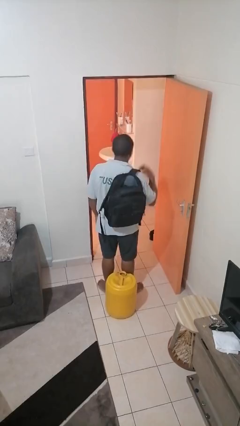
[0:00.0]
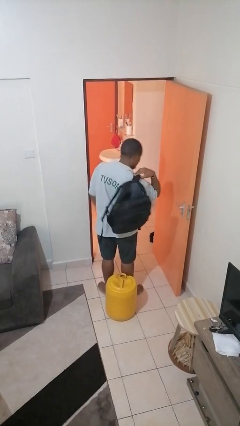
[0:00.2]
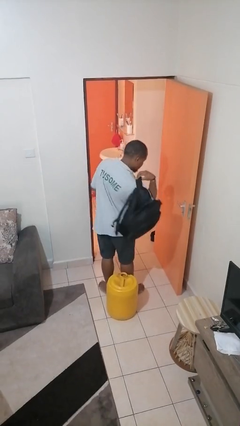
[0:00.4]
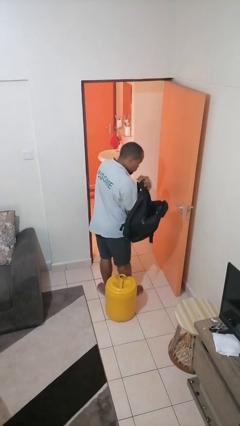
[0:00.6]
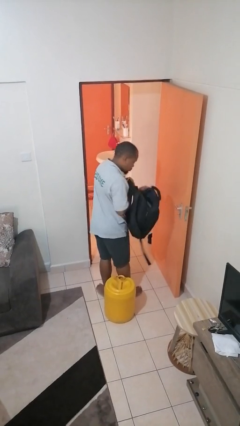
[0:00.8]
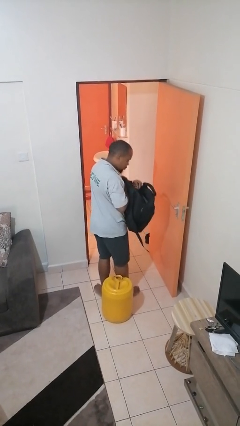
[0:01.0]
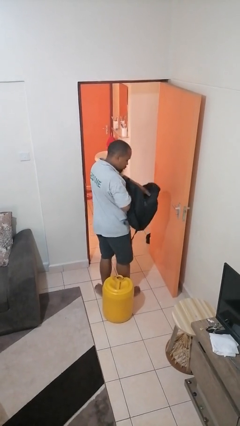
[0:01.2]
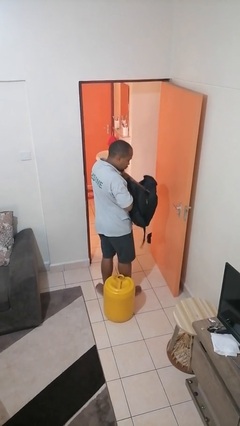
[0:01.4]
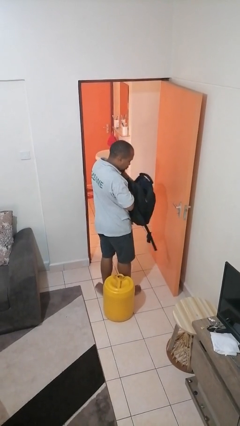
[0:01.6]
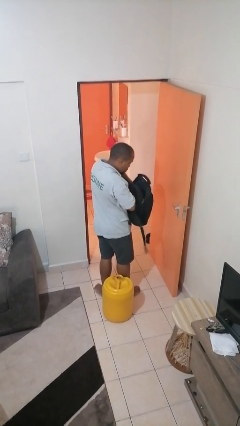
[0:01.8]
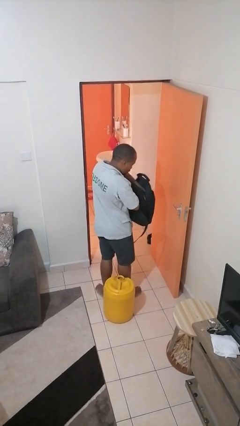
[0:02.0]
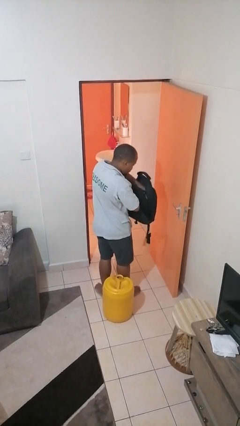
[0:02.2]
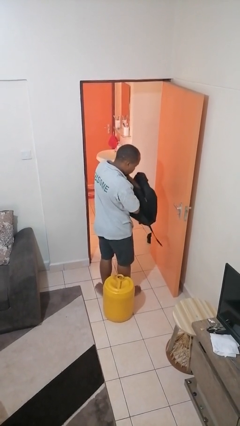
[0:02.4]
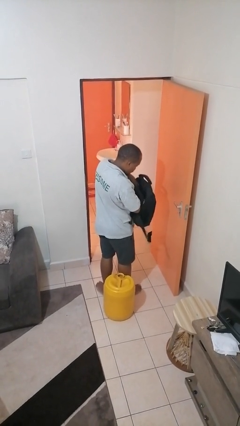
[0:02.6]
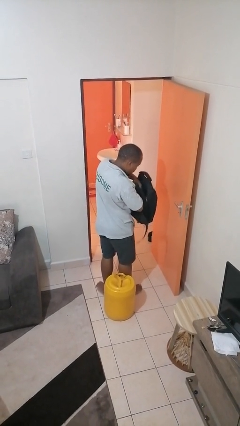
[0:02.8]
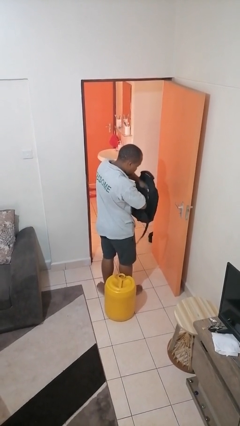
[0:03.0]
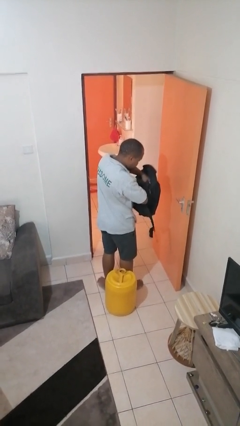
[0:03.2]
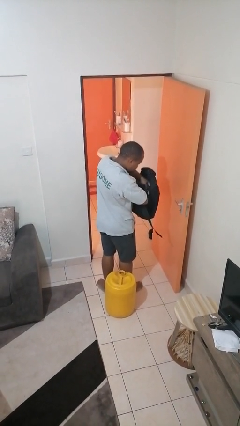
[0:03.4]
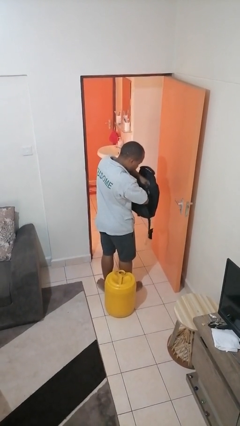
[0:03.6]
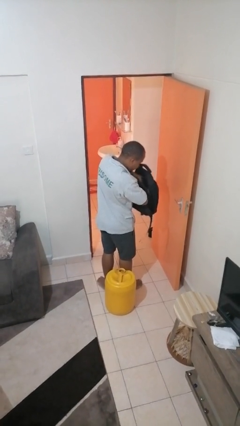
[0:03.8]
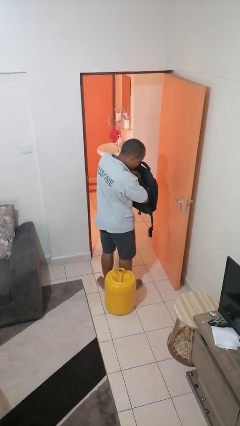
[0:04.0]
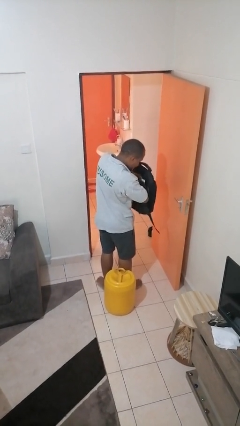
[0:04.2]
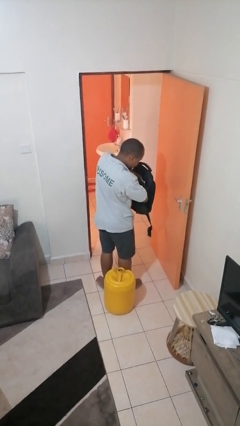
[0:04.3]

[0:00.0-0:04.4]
person searches in backpack

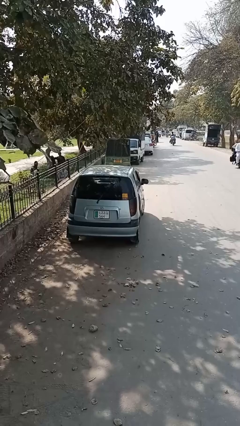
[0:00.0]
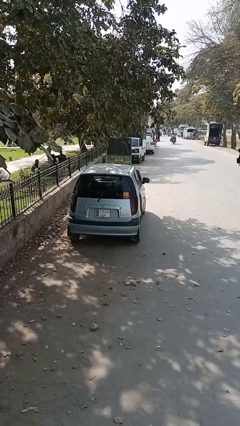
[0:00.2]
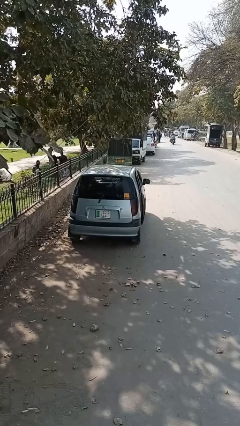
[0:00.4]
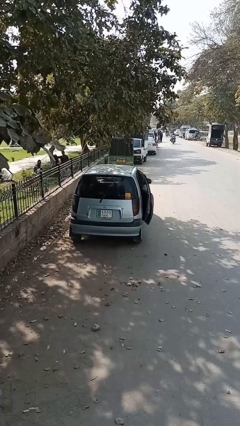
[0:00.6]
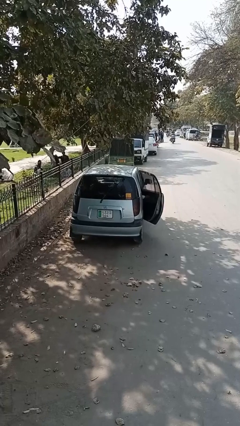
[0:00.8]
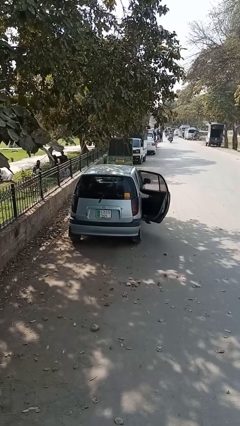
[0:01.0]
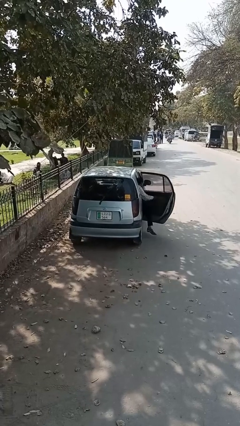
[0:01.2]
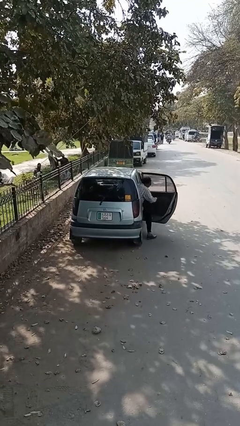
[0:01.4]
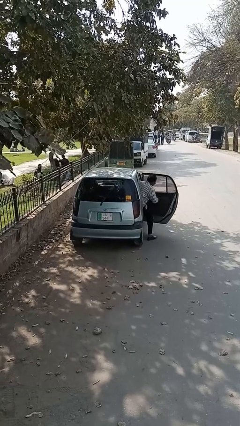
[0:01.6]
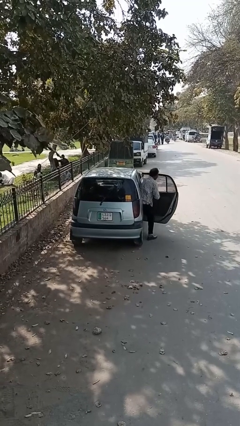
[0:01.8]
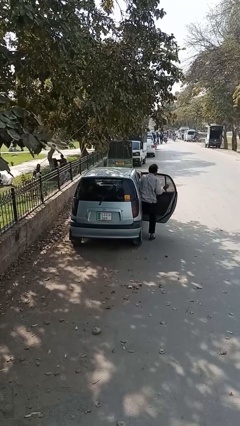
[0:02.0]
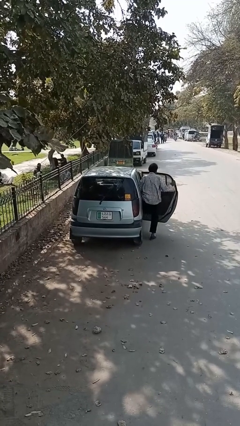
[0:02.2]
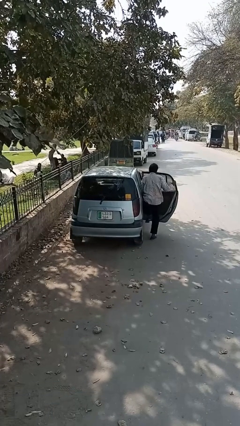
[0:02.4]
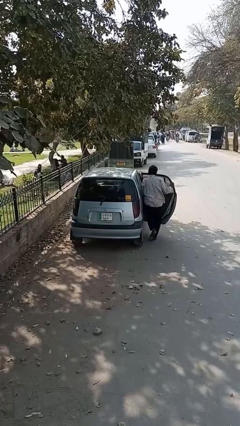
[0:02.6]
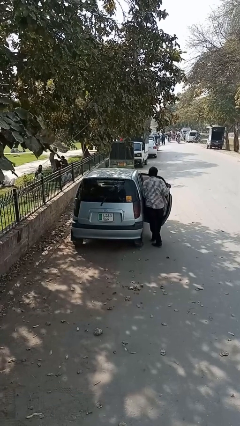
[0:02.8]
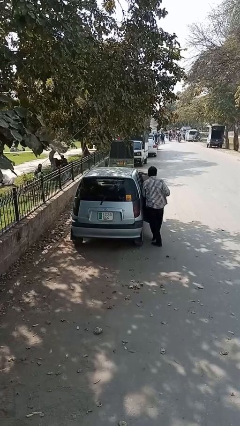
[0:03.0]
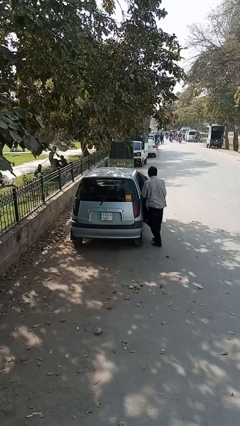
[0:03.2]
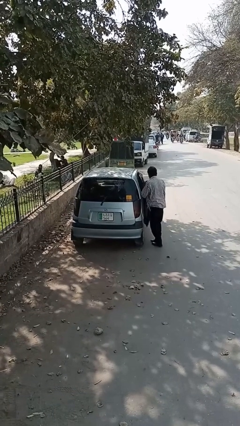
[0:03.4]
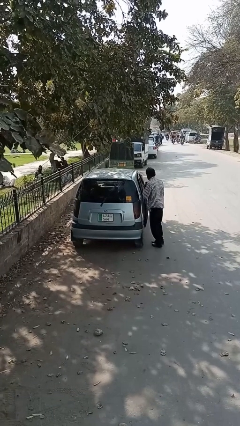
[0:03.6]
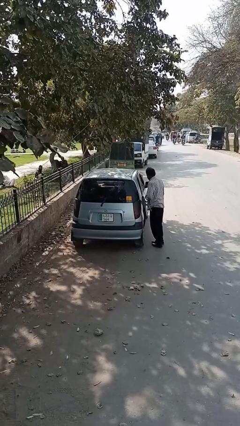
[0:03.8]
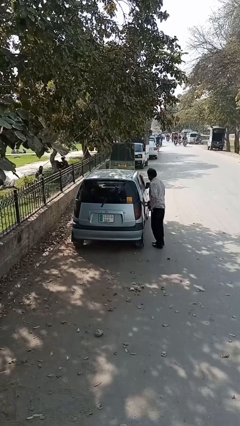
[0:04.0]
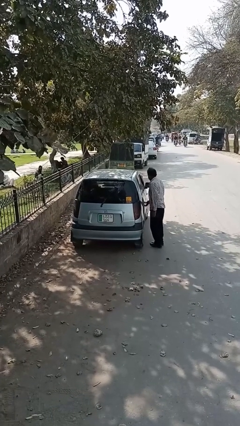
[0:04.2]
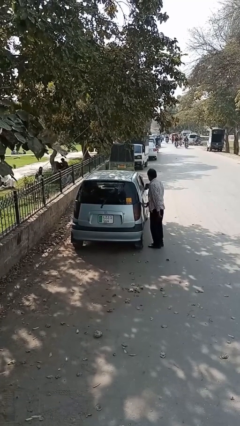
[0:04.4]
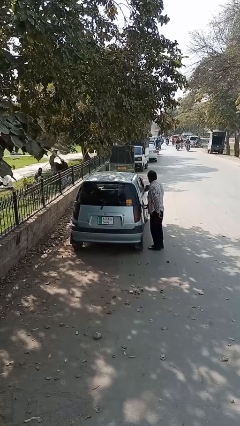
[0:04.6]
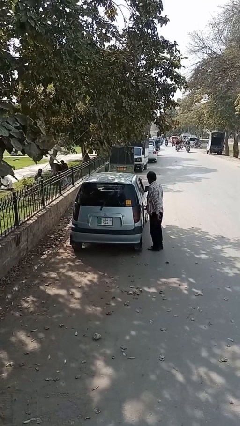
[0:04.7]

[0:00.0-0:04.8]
car drops off person

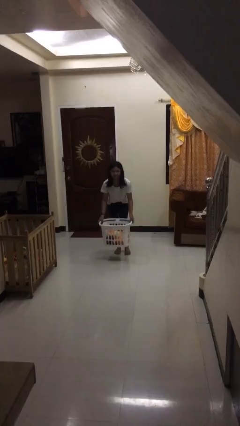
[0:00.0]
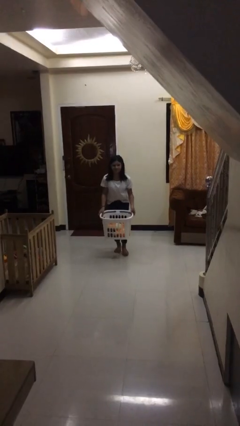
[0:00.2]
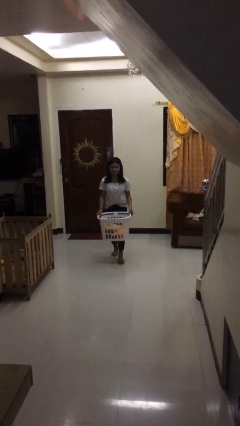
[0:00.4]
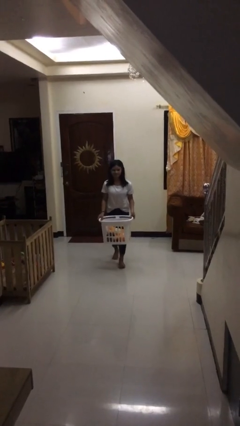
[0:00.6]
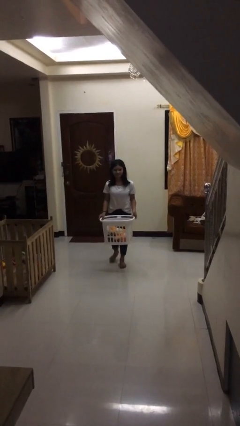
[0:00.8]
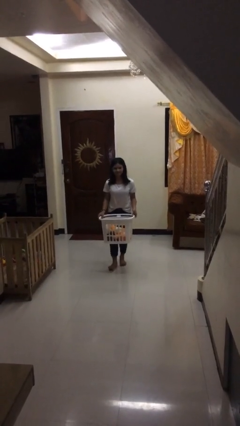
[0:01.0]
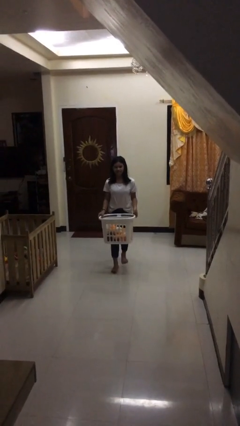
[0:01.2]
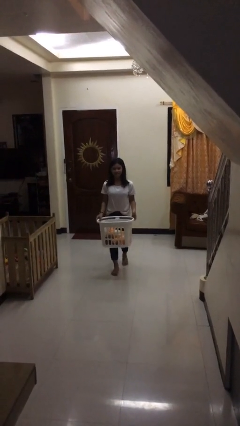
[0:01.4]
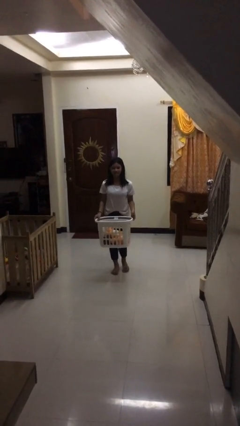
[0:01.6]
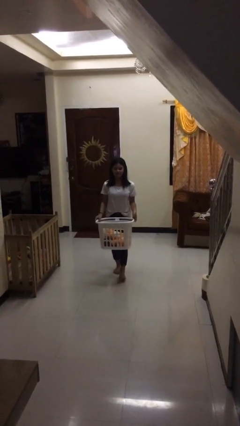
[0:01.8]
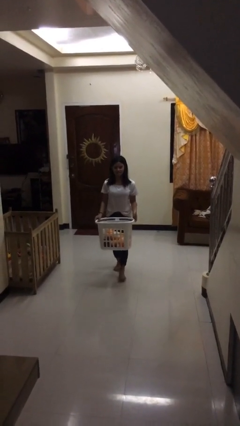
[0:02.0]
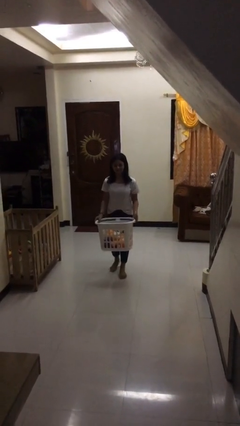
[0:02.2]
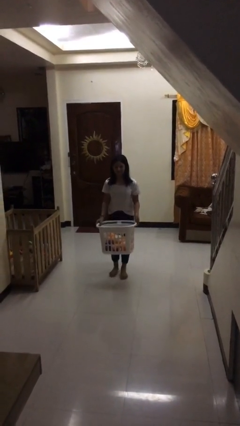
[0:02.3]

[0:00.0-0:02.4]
person carries heavy object

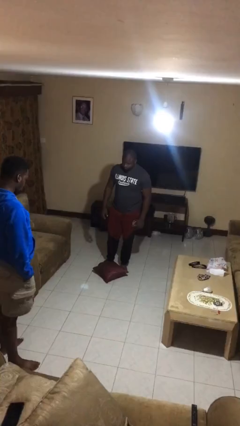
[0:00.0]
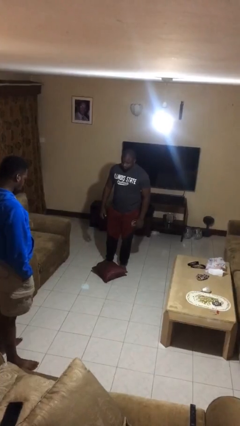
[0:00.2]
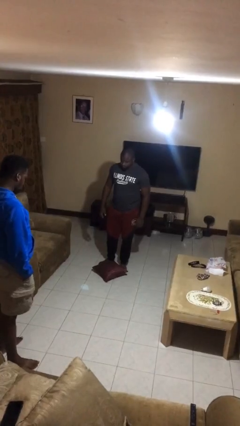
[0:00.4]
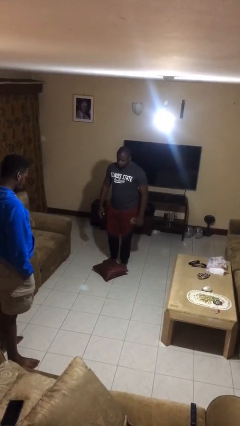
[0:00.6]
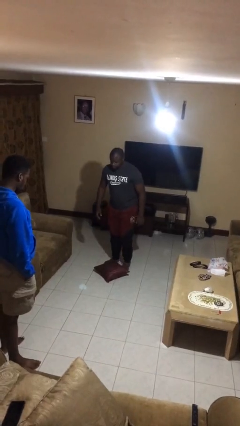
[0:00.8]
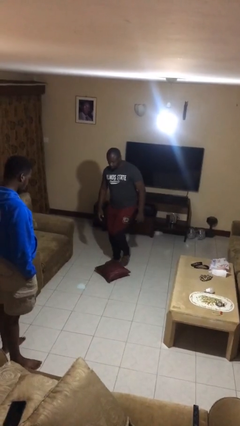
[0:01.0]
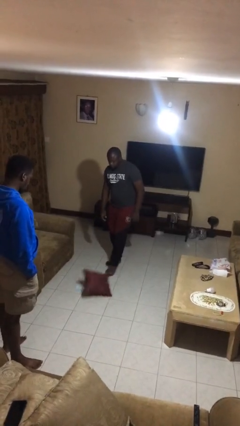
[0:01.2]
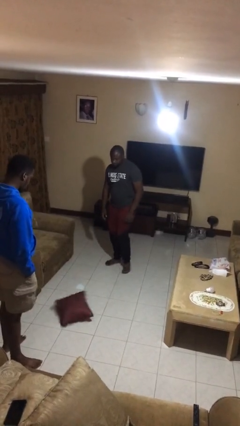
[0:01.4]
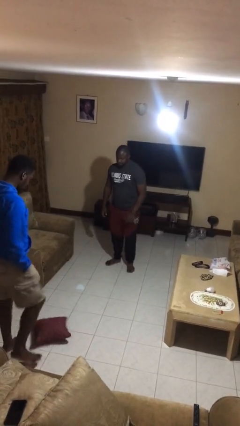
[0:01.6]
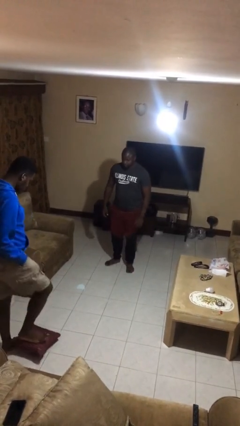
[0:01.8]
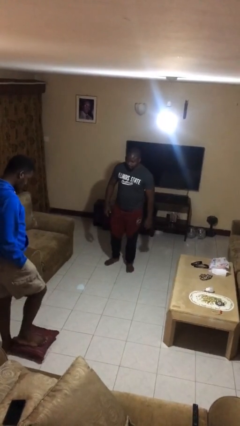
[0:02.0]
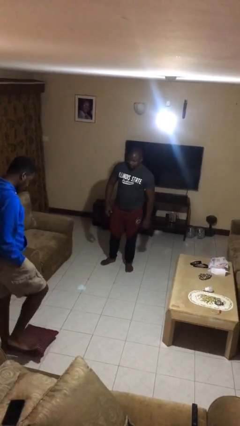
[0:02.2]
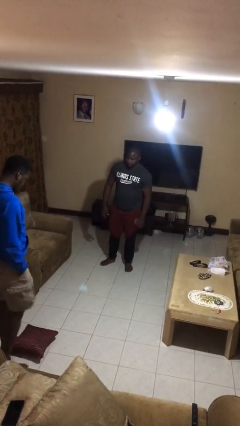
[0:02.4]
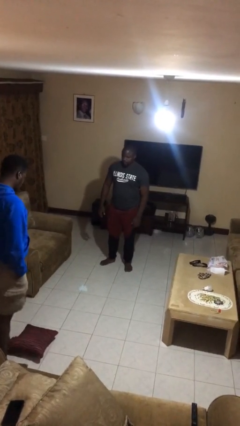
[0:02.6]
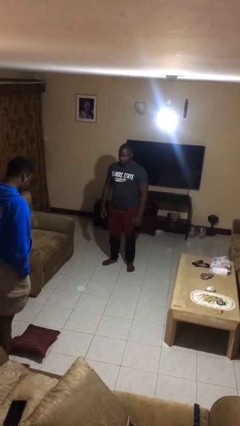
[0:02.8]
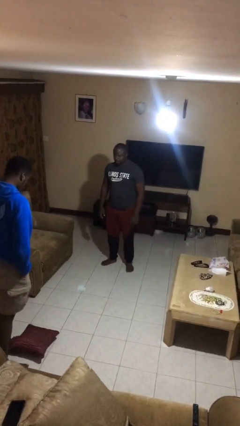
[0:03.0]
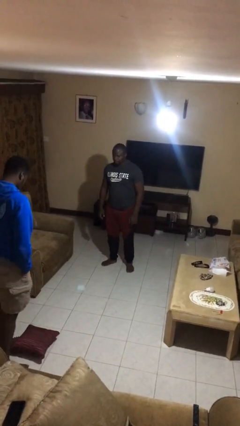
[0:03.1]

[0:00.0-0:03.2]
person kicks object to person

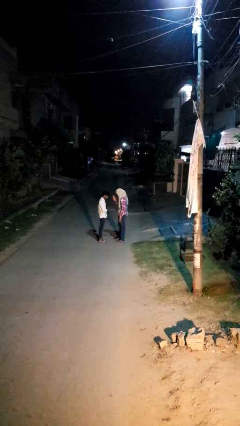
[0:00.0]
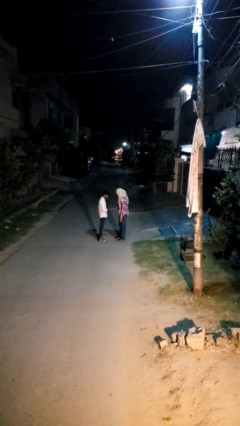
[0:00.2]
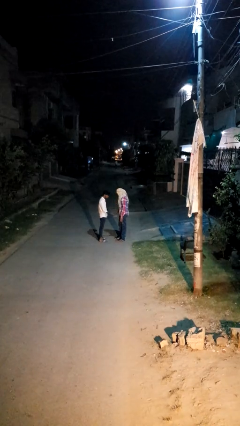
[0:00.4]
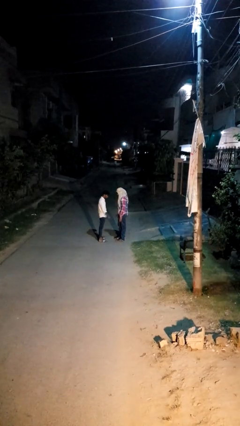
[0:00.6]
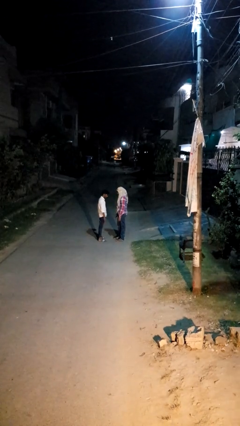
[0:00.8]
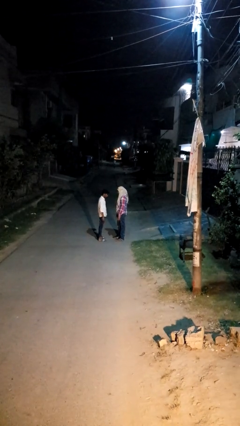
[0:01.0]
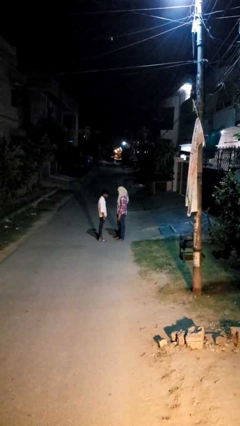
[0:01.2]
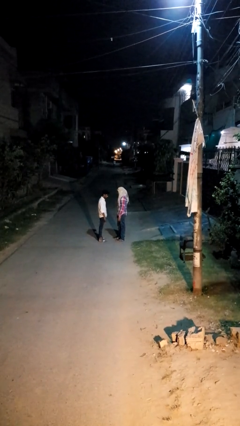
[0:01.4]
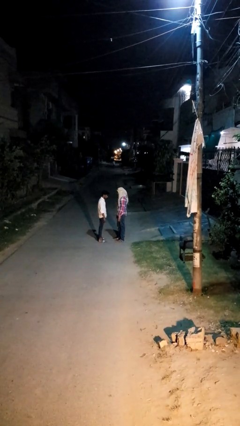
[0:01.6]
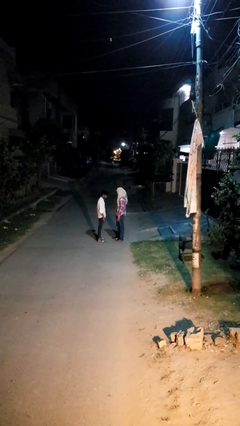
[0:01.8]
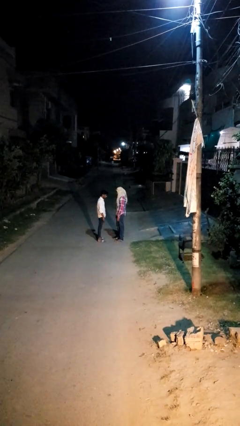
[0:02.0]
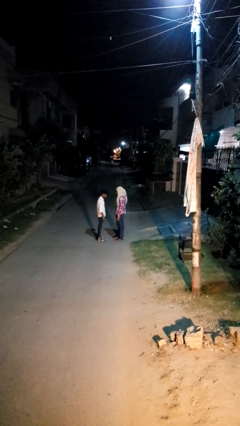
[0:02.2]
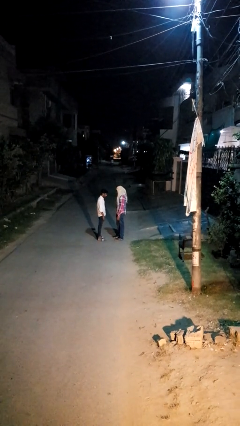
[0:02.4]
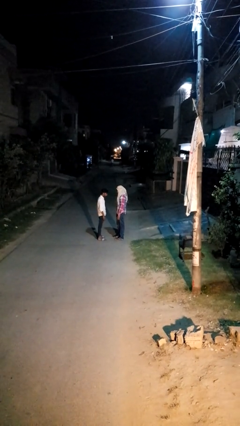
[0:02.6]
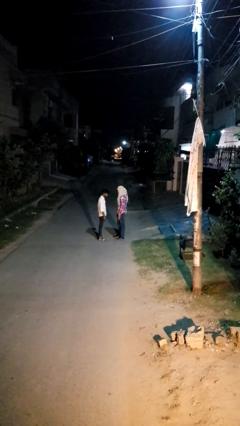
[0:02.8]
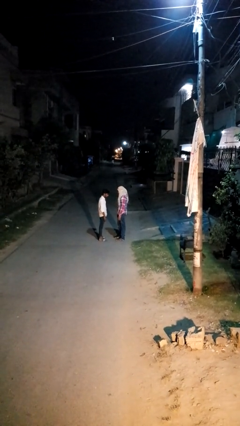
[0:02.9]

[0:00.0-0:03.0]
person highfives hand
